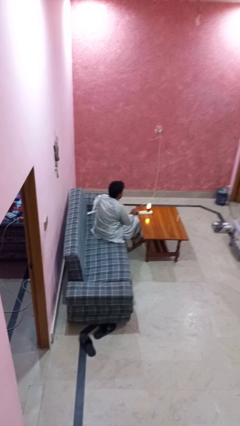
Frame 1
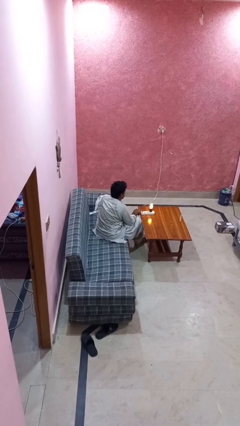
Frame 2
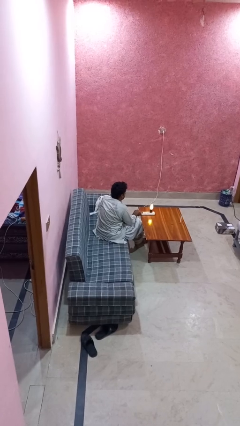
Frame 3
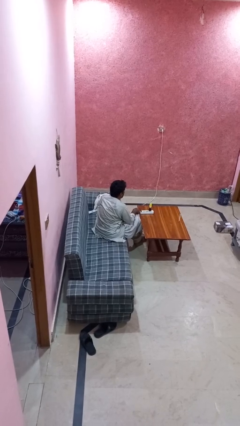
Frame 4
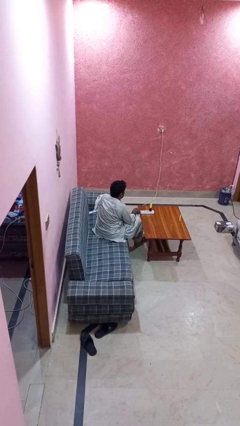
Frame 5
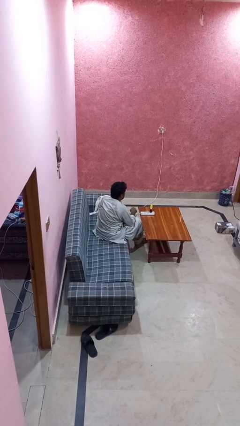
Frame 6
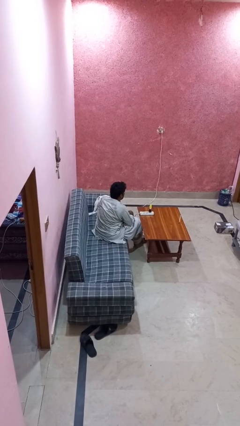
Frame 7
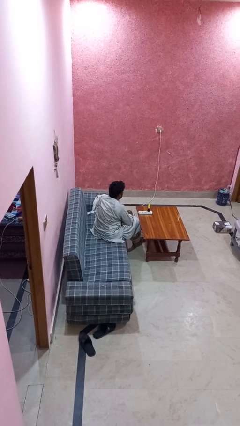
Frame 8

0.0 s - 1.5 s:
person turns off lamp

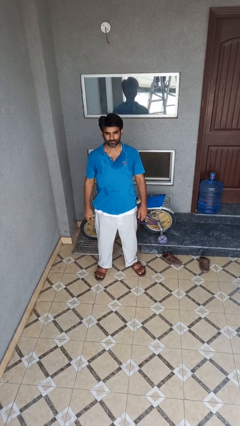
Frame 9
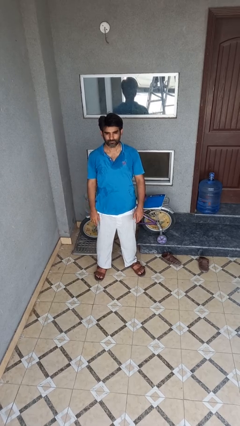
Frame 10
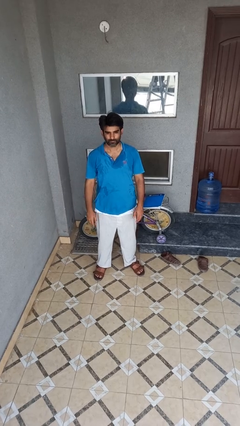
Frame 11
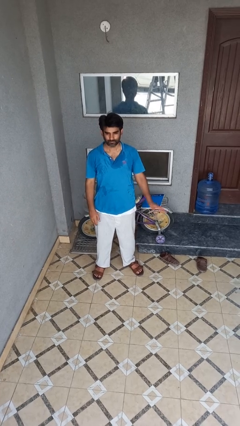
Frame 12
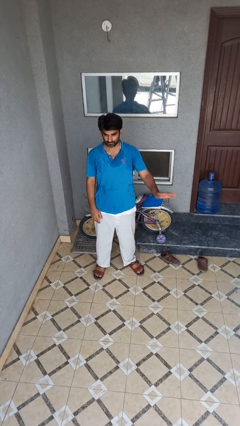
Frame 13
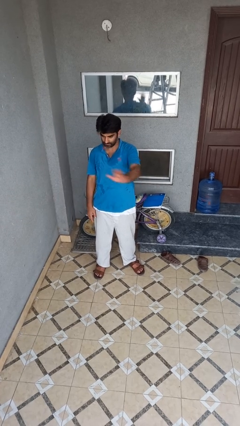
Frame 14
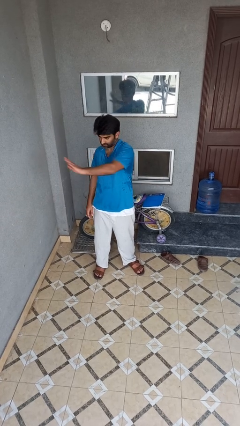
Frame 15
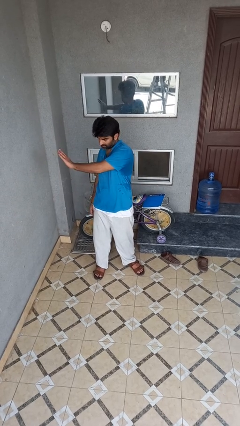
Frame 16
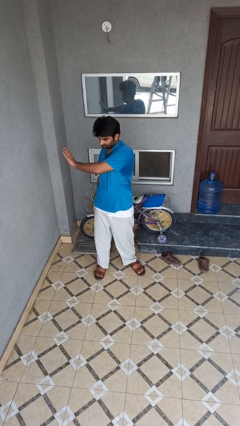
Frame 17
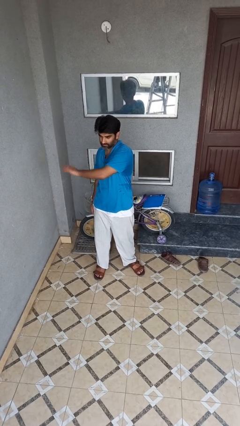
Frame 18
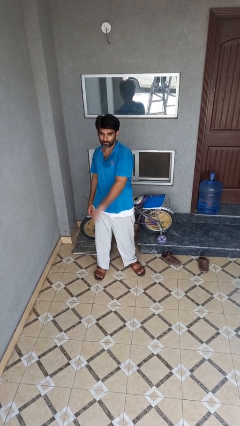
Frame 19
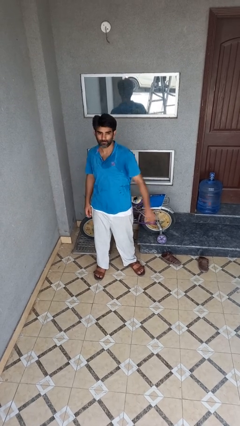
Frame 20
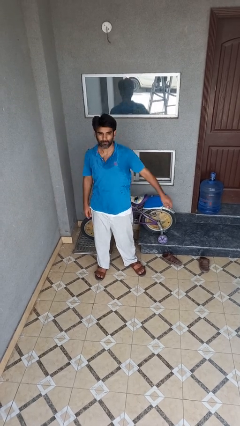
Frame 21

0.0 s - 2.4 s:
person gestures swipe right

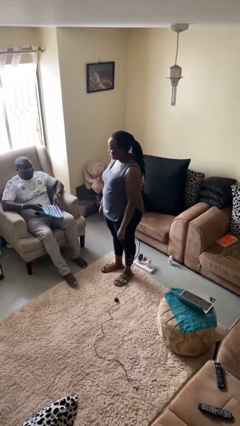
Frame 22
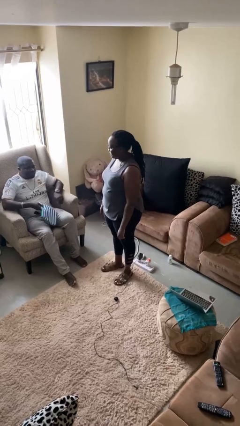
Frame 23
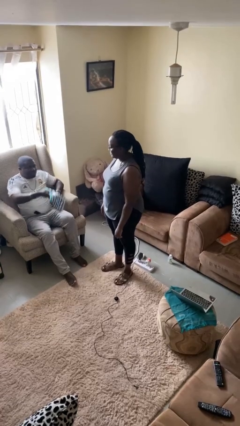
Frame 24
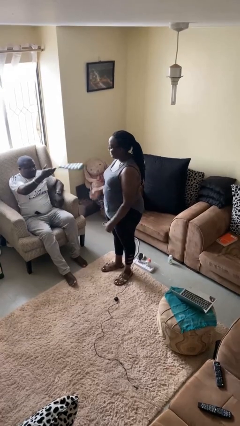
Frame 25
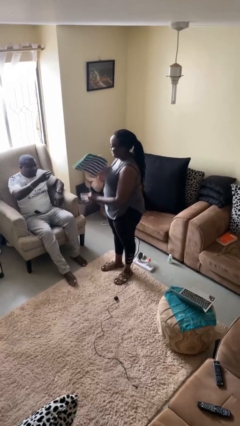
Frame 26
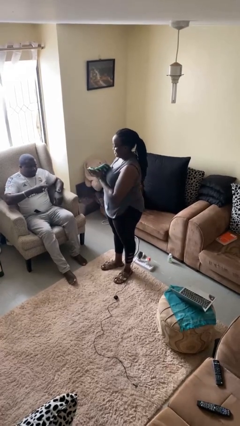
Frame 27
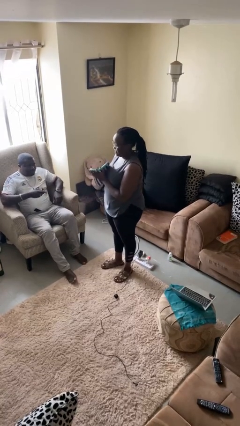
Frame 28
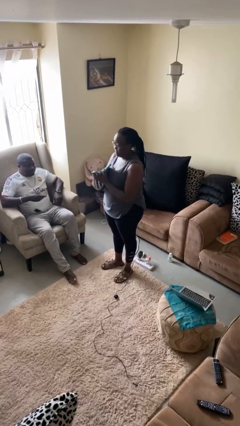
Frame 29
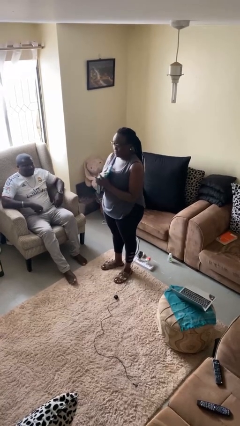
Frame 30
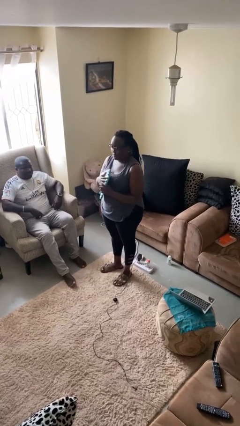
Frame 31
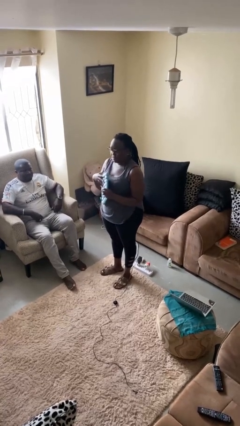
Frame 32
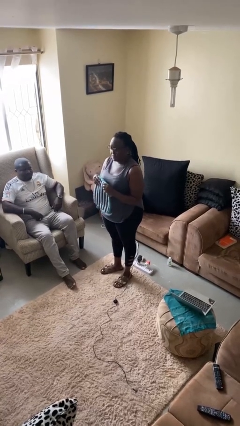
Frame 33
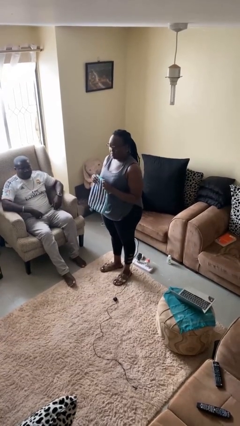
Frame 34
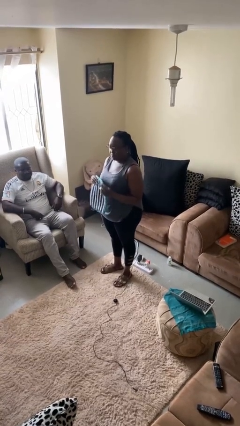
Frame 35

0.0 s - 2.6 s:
person catches object from person

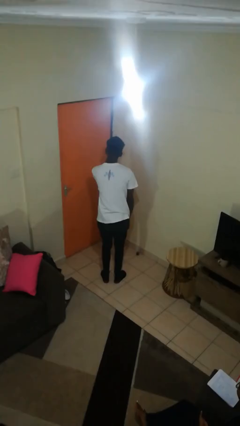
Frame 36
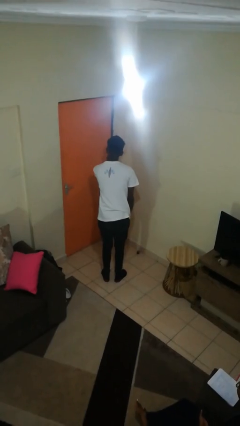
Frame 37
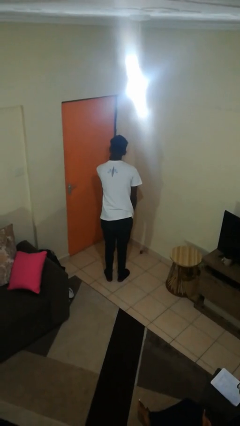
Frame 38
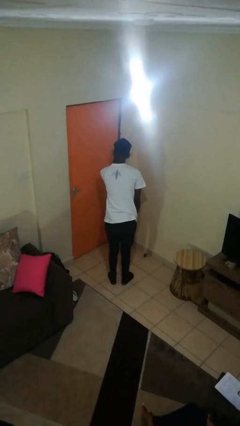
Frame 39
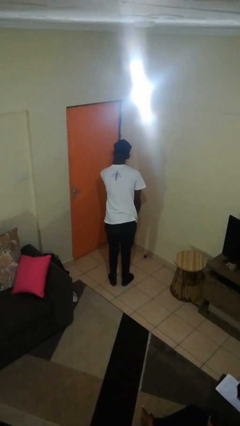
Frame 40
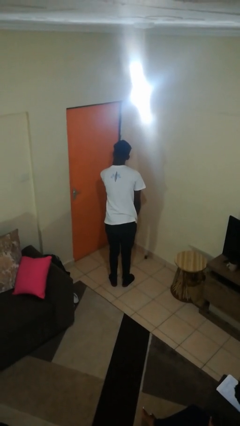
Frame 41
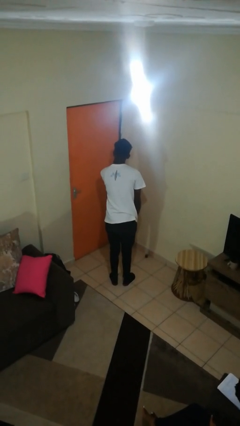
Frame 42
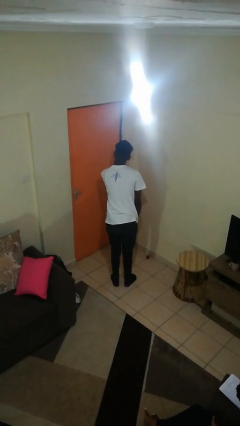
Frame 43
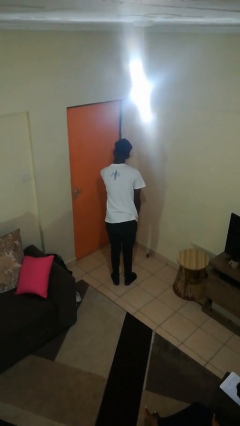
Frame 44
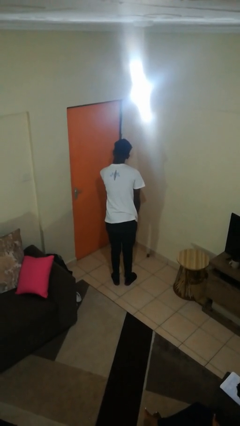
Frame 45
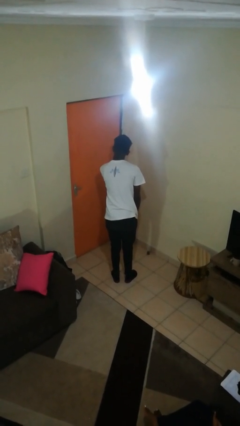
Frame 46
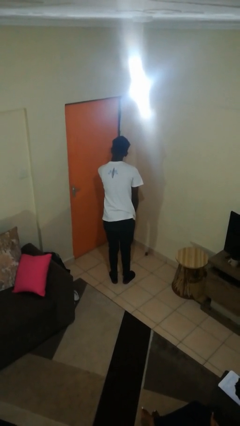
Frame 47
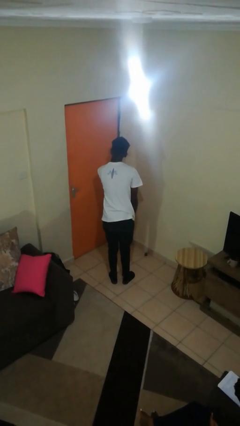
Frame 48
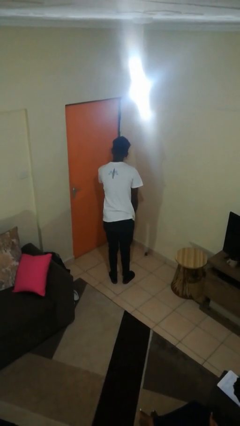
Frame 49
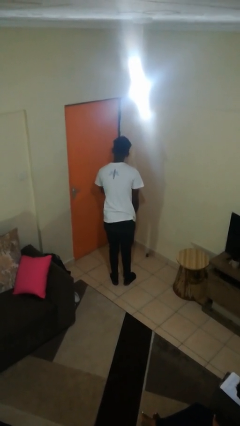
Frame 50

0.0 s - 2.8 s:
person gestures watch closely

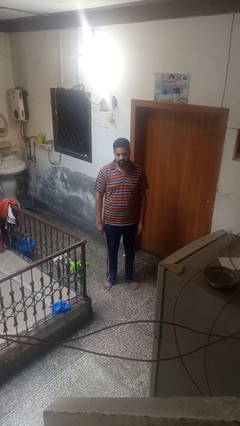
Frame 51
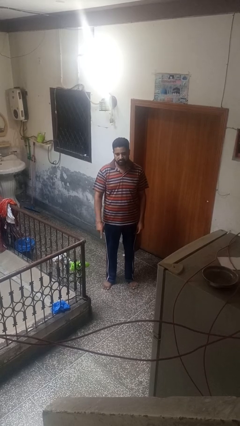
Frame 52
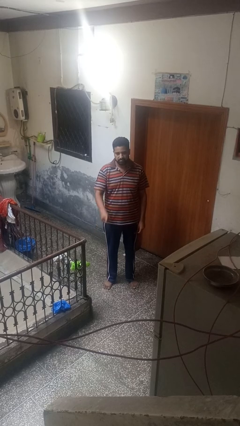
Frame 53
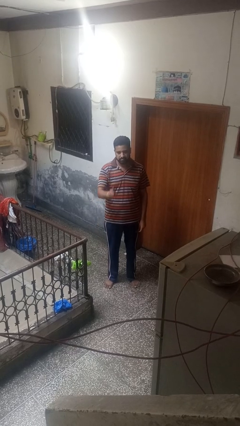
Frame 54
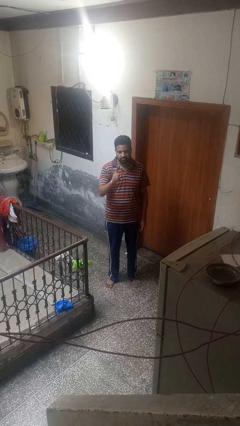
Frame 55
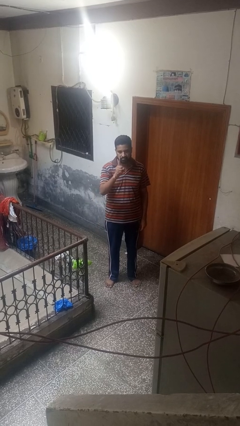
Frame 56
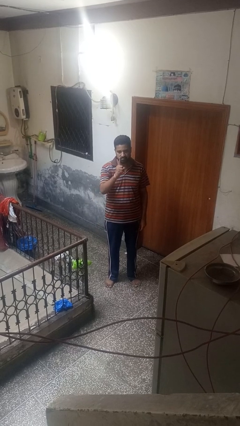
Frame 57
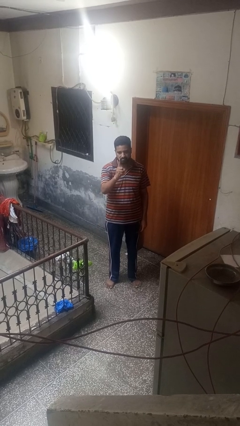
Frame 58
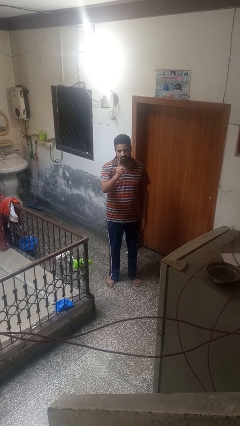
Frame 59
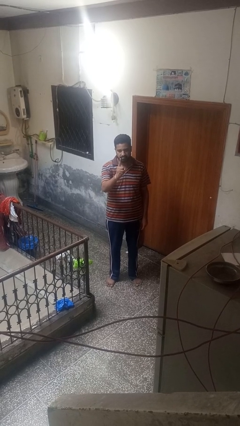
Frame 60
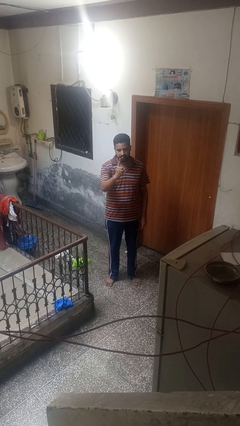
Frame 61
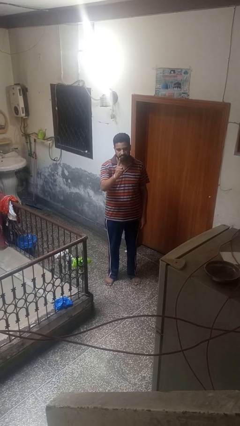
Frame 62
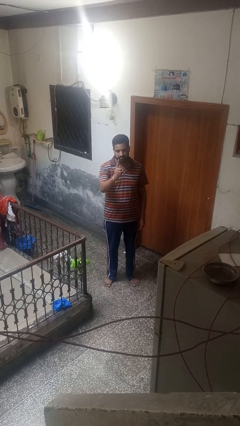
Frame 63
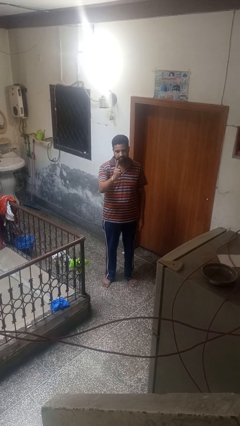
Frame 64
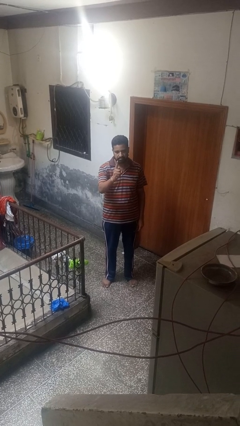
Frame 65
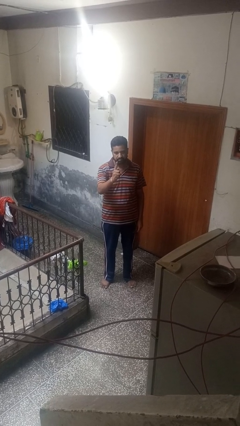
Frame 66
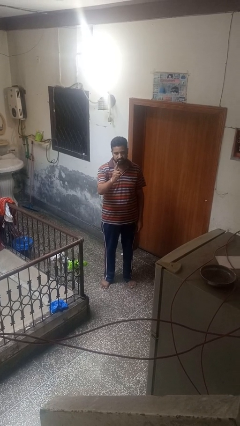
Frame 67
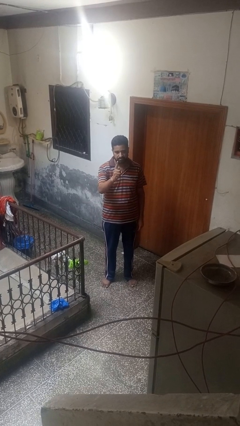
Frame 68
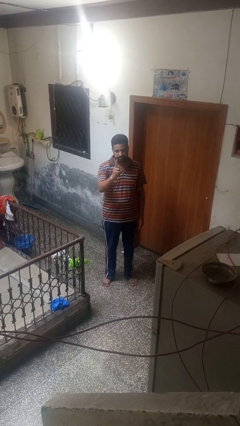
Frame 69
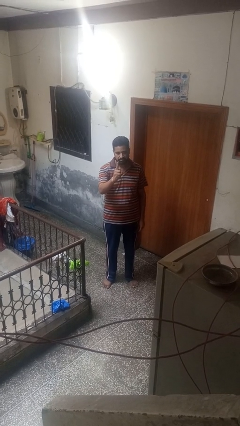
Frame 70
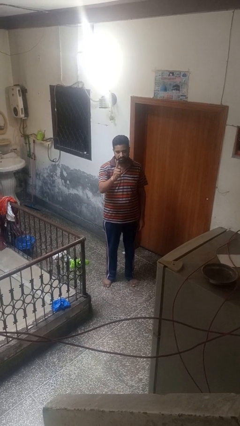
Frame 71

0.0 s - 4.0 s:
person gestures number one

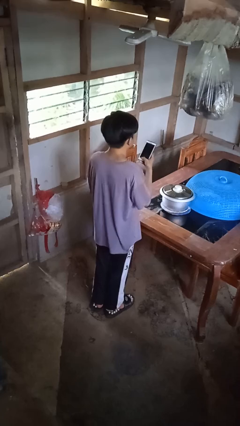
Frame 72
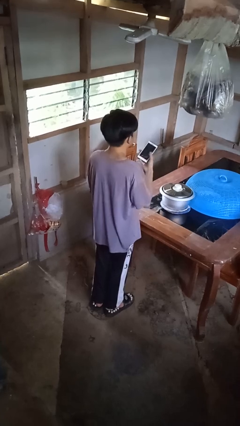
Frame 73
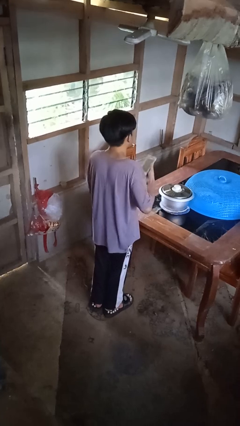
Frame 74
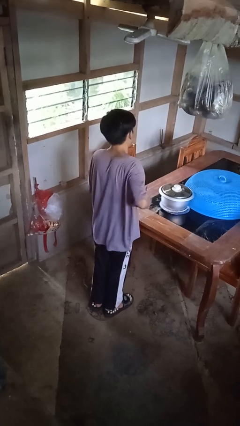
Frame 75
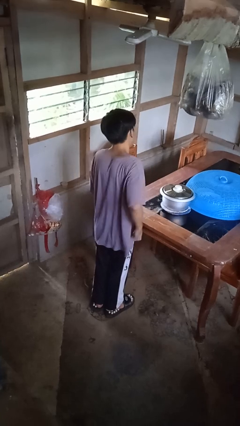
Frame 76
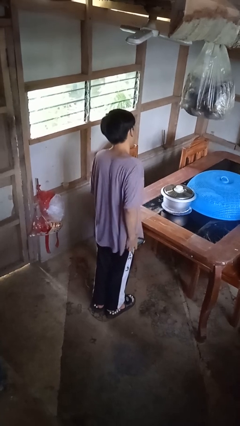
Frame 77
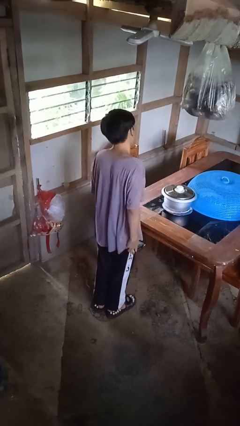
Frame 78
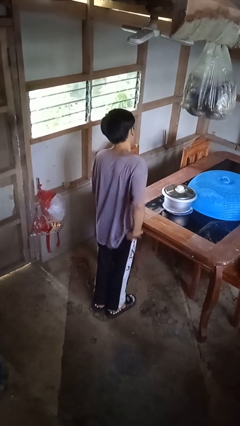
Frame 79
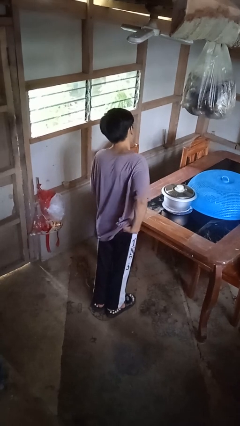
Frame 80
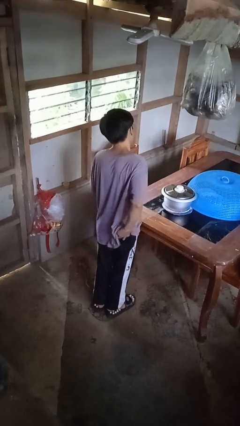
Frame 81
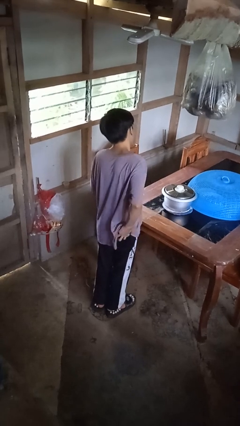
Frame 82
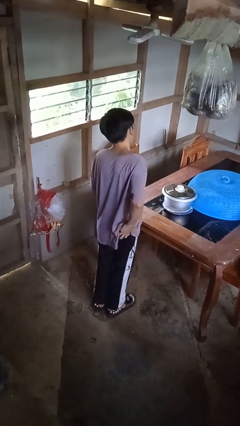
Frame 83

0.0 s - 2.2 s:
person puts phone into pocket

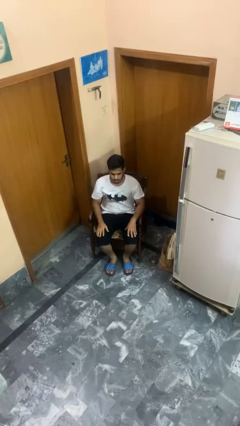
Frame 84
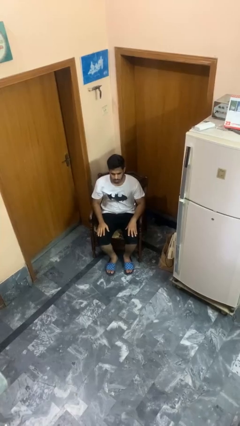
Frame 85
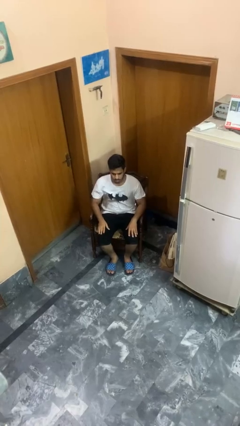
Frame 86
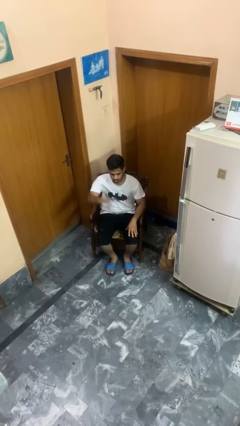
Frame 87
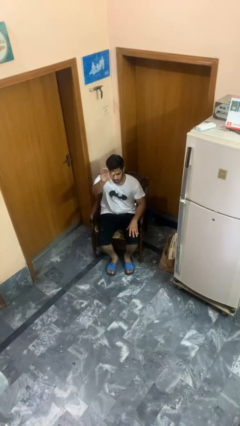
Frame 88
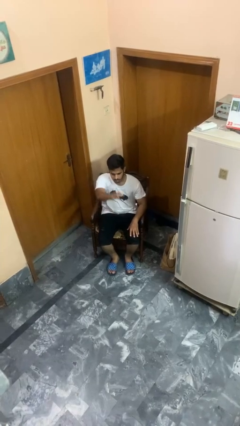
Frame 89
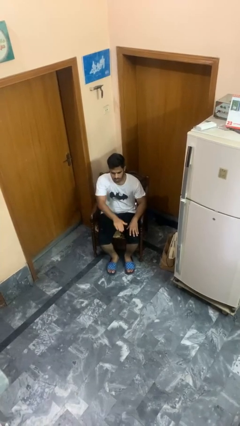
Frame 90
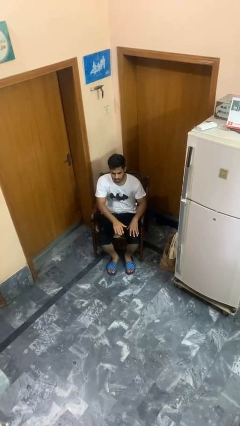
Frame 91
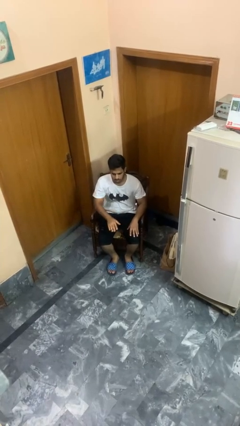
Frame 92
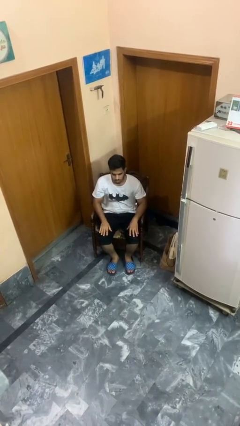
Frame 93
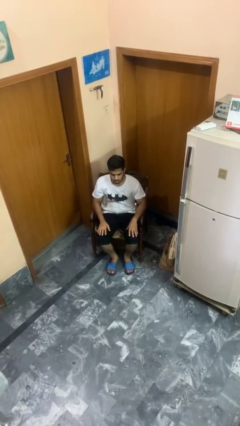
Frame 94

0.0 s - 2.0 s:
person gestures swipe down
